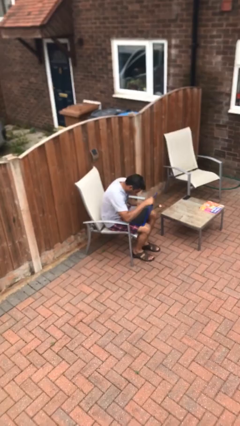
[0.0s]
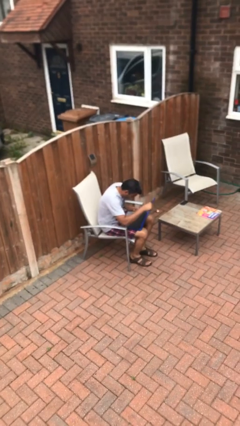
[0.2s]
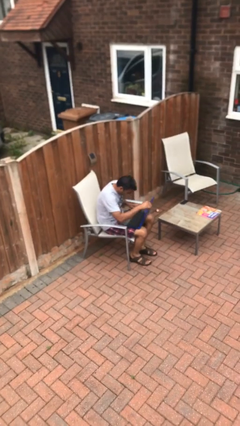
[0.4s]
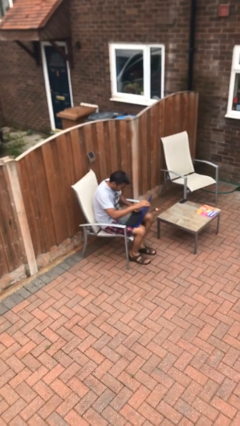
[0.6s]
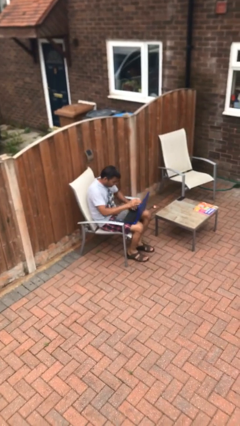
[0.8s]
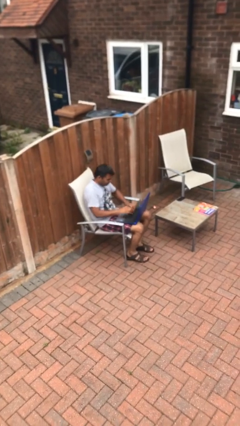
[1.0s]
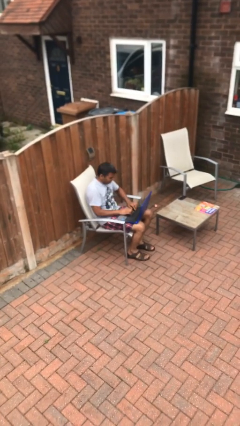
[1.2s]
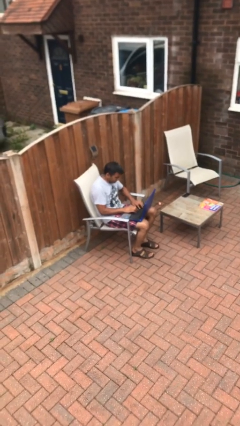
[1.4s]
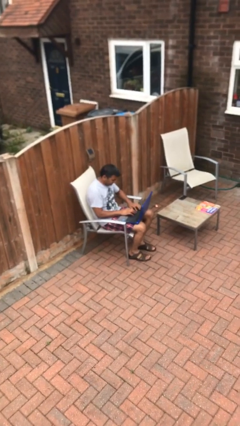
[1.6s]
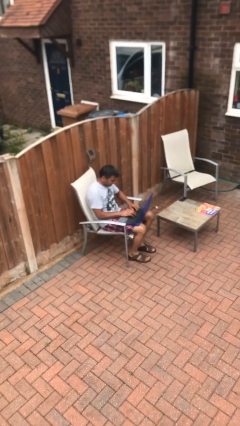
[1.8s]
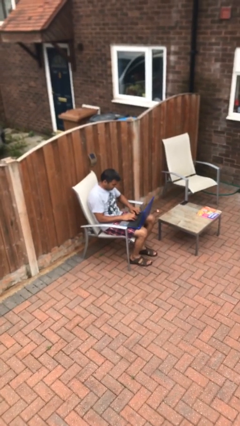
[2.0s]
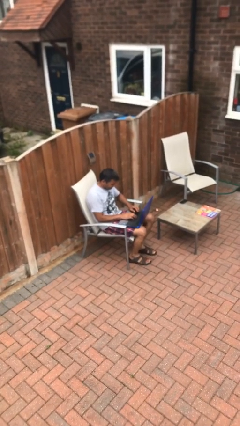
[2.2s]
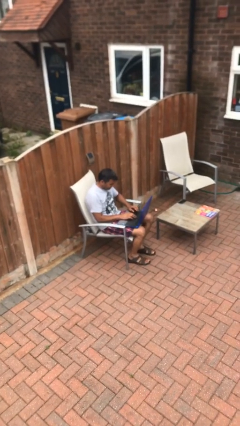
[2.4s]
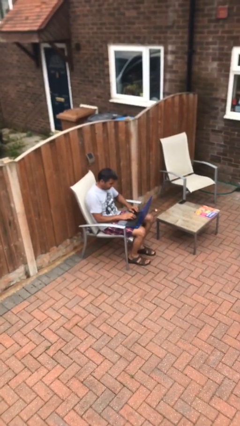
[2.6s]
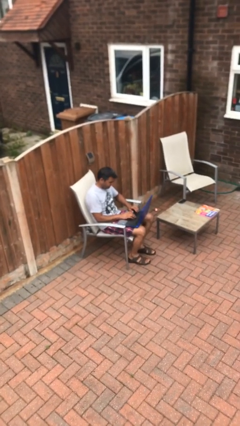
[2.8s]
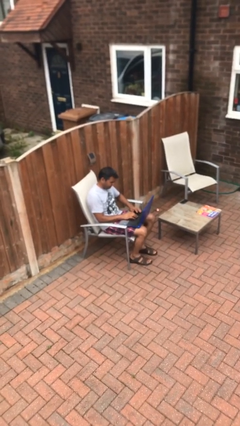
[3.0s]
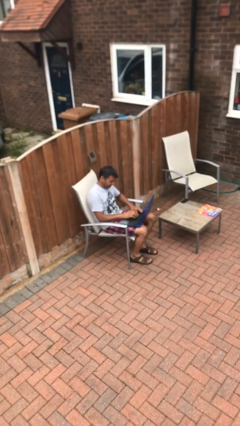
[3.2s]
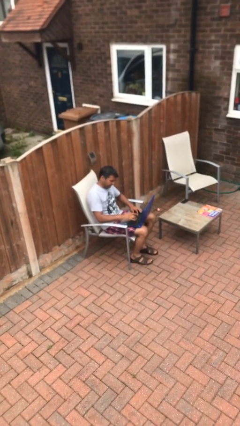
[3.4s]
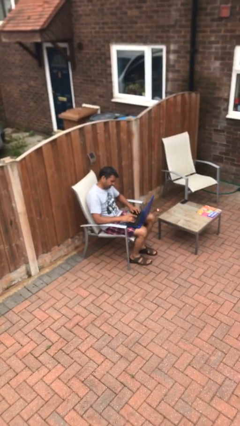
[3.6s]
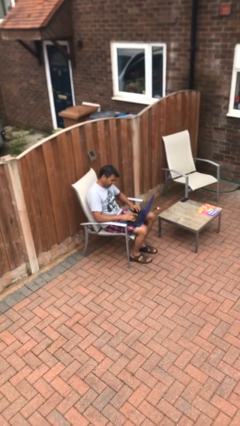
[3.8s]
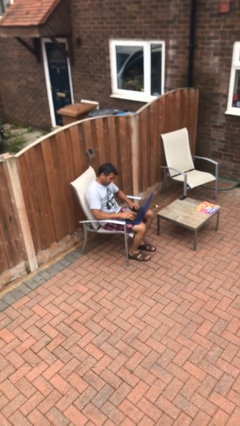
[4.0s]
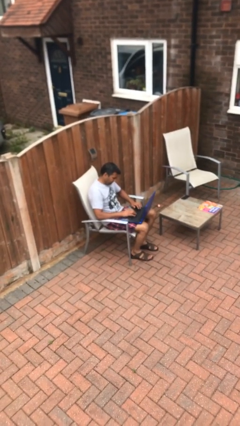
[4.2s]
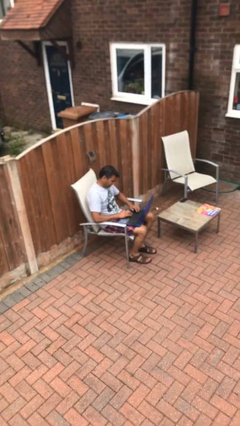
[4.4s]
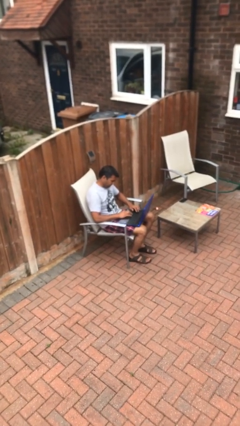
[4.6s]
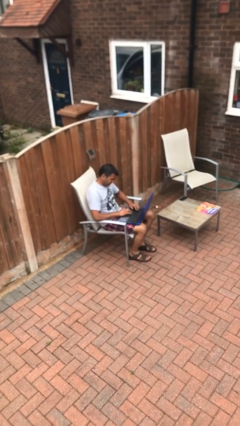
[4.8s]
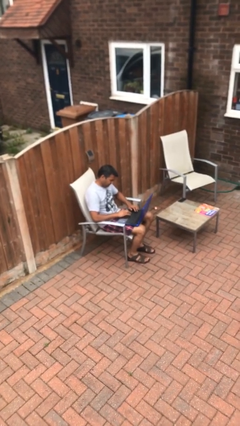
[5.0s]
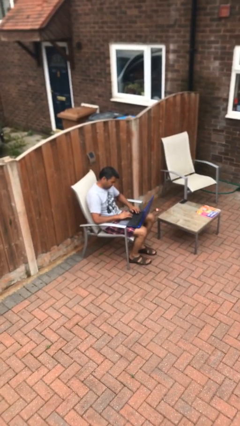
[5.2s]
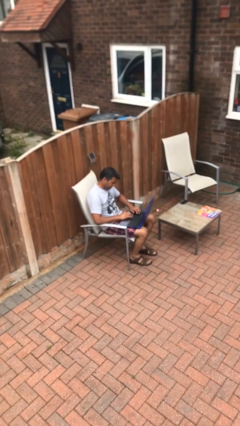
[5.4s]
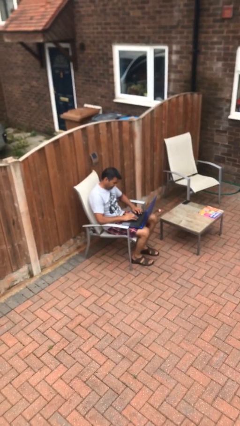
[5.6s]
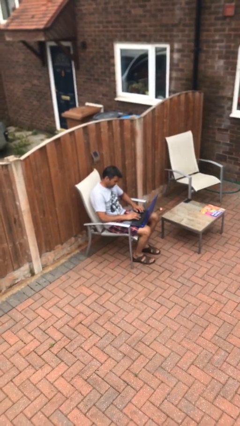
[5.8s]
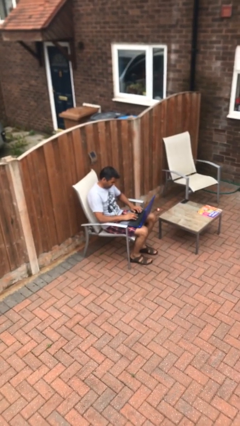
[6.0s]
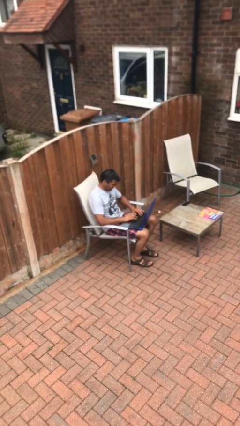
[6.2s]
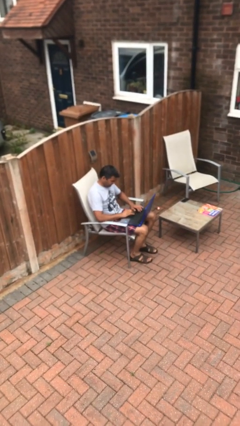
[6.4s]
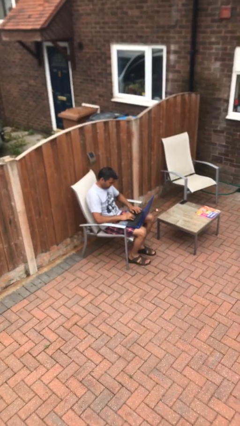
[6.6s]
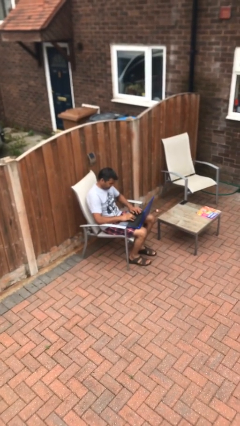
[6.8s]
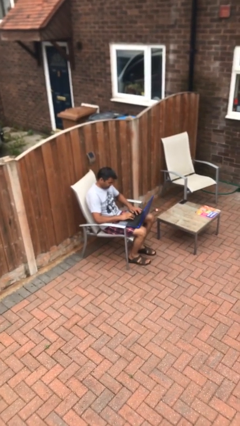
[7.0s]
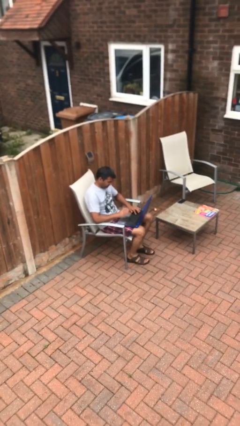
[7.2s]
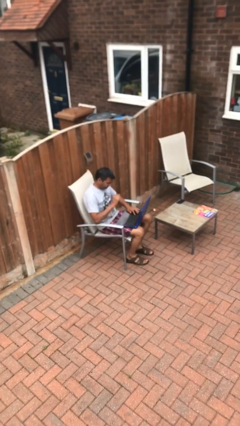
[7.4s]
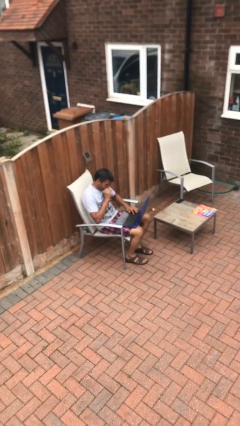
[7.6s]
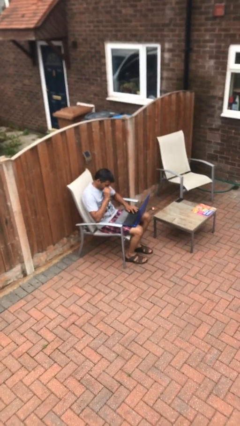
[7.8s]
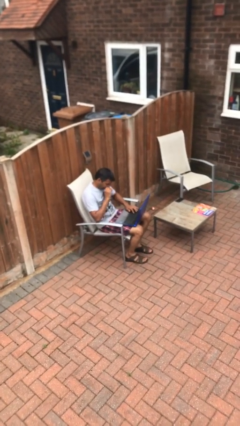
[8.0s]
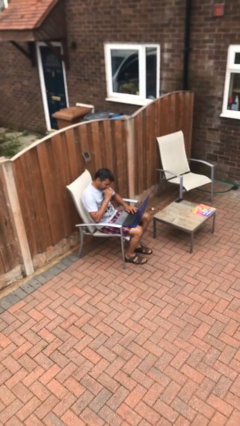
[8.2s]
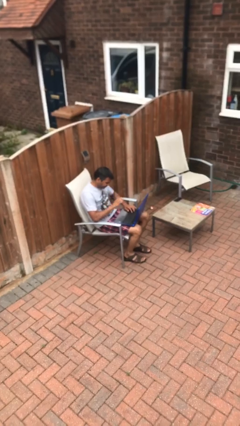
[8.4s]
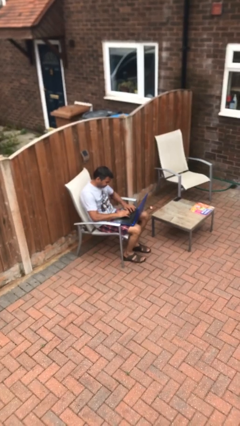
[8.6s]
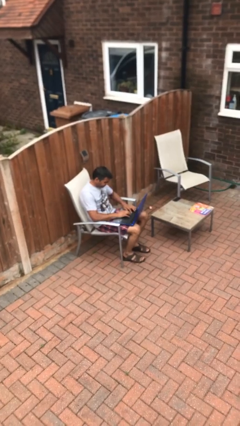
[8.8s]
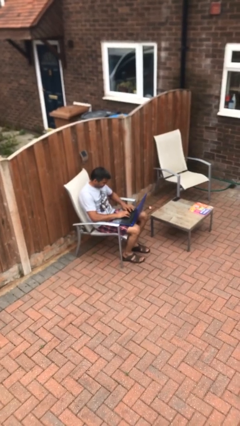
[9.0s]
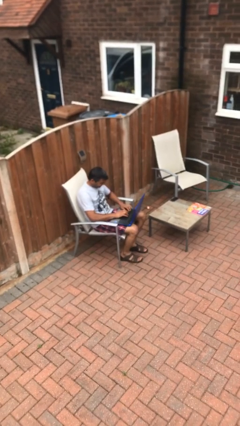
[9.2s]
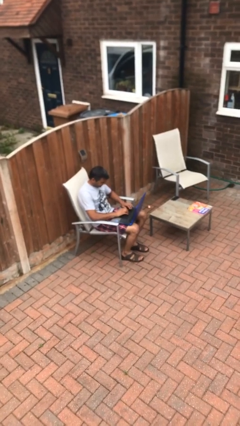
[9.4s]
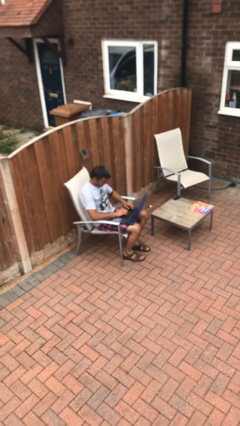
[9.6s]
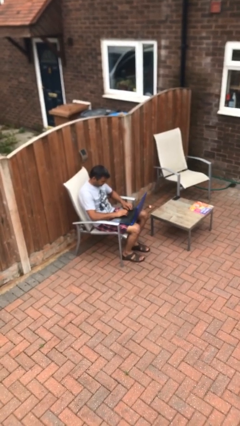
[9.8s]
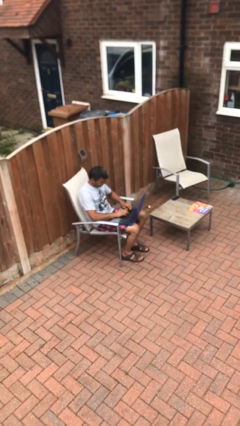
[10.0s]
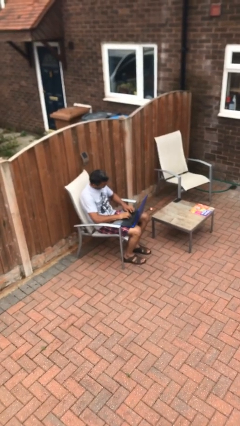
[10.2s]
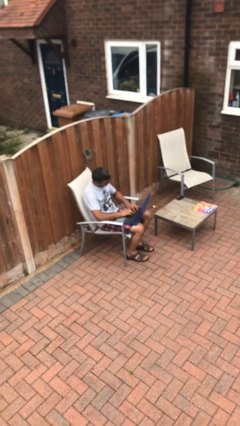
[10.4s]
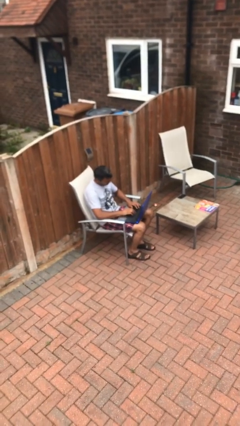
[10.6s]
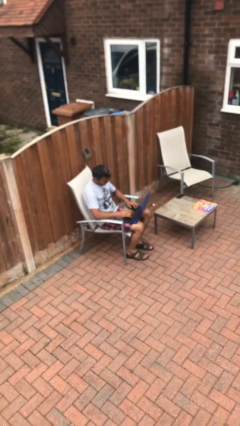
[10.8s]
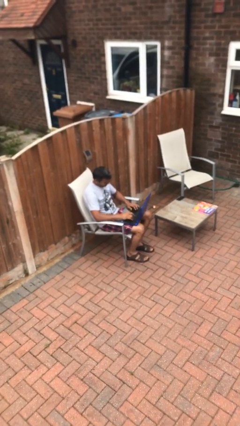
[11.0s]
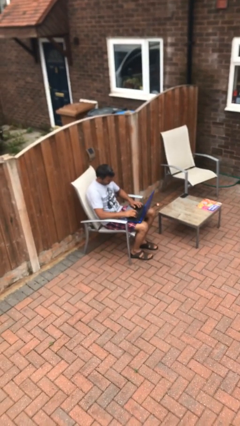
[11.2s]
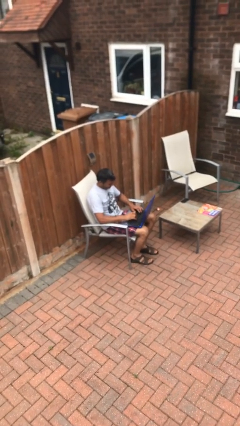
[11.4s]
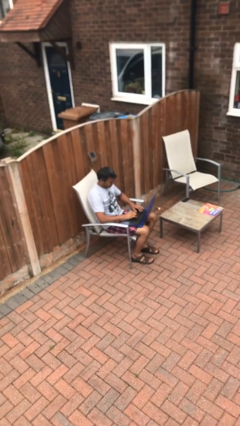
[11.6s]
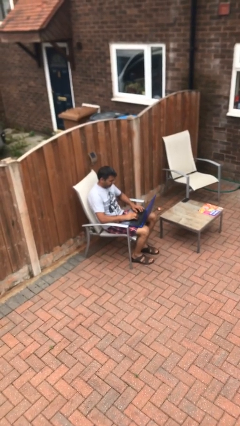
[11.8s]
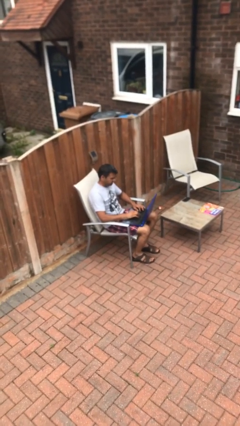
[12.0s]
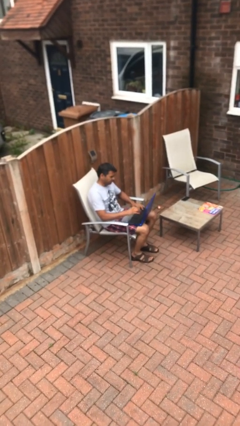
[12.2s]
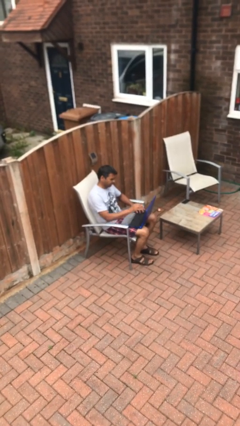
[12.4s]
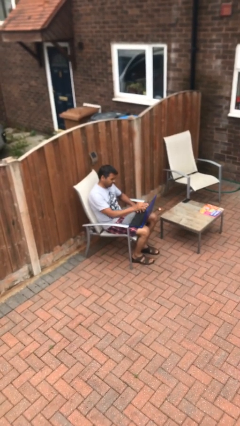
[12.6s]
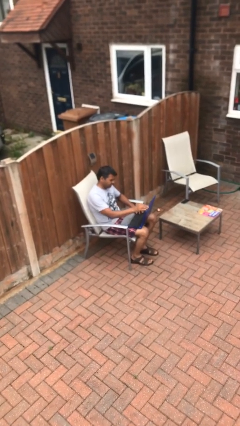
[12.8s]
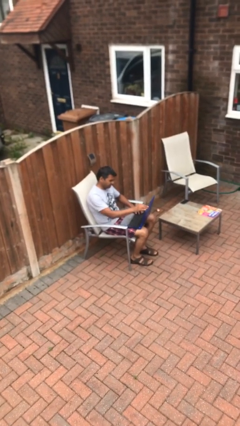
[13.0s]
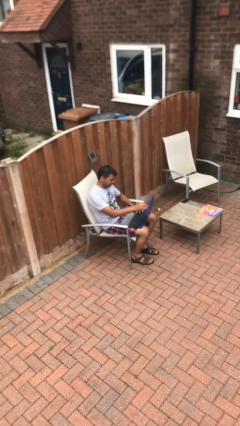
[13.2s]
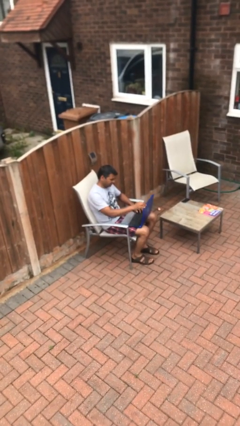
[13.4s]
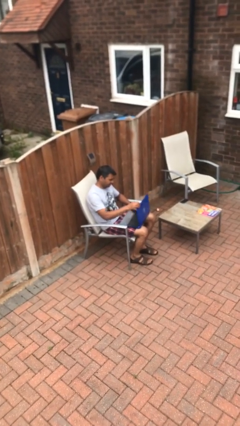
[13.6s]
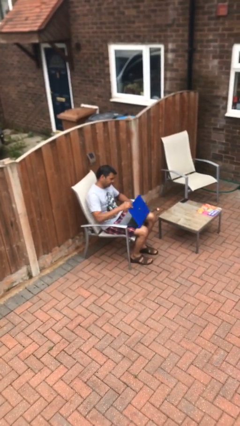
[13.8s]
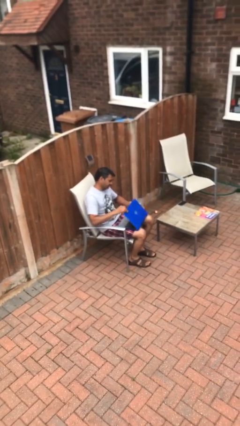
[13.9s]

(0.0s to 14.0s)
person interacts with laptop

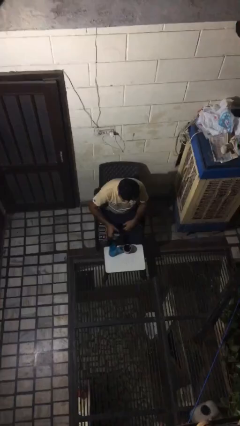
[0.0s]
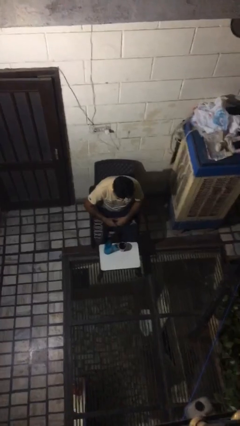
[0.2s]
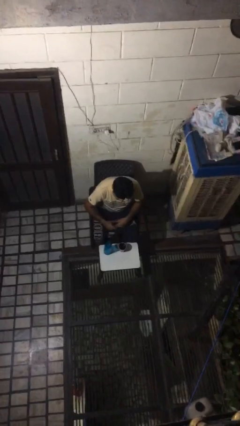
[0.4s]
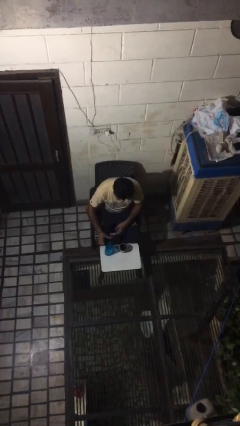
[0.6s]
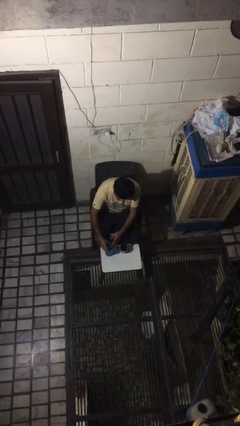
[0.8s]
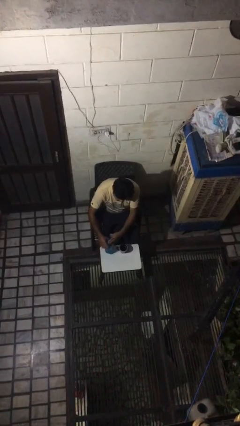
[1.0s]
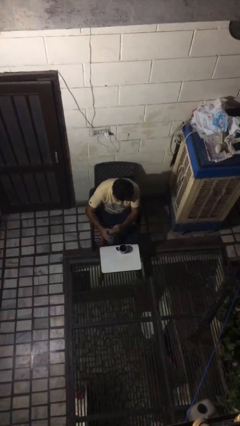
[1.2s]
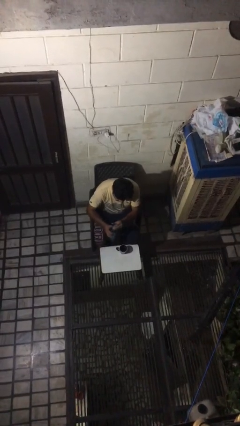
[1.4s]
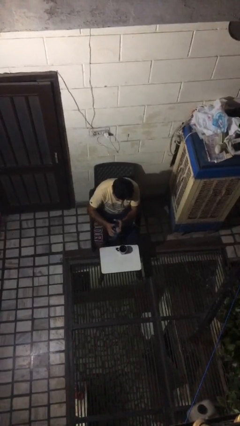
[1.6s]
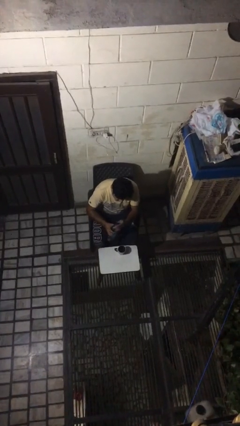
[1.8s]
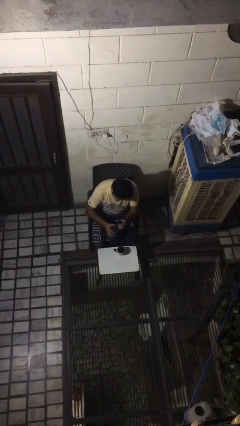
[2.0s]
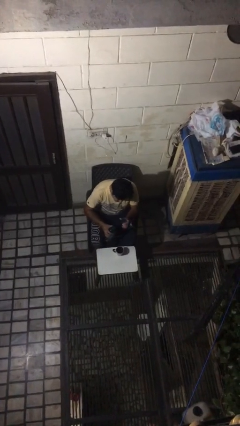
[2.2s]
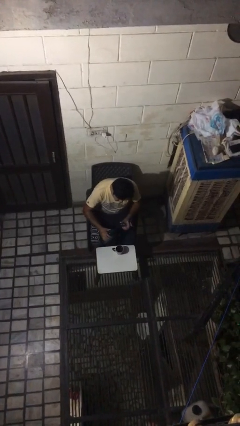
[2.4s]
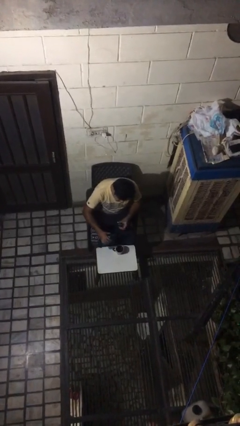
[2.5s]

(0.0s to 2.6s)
person unscrews lid from bottle

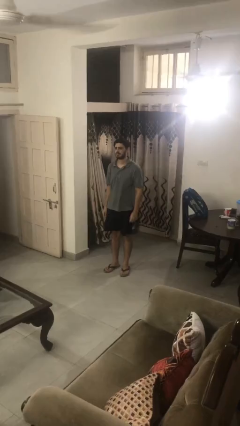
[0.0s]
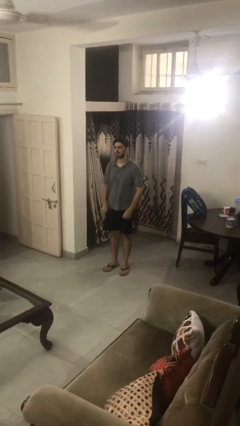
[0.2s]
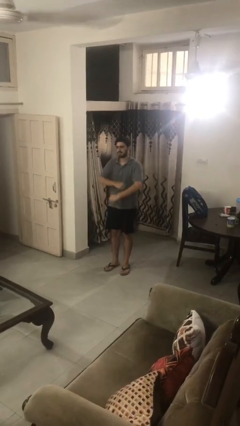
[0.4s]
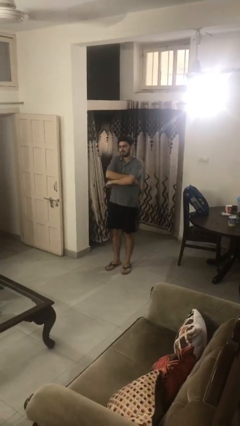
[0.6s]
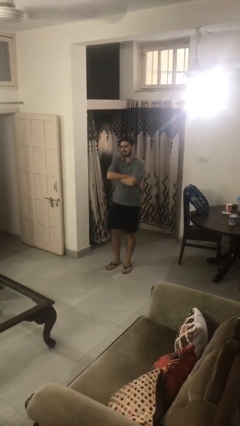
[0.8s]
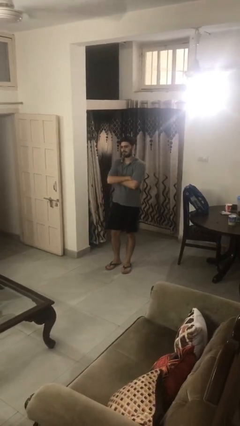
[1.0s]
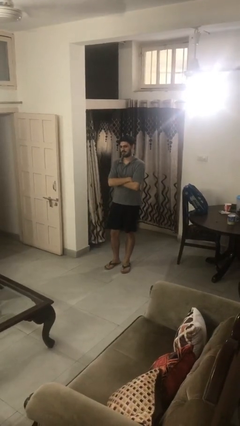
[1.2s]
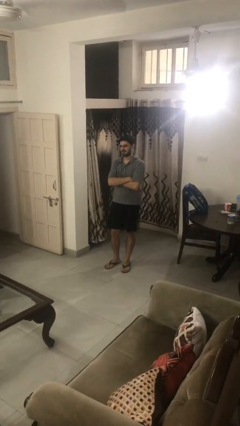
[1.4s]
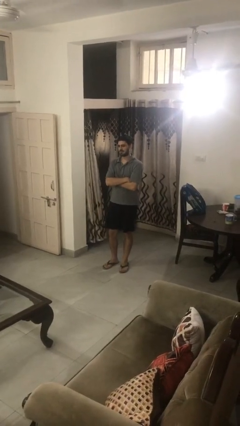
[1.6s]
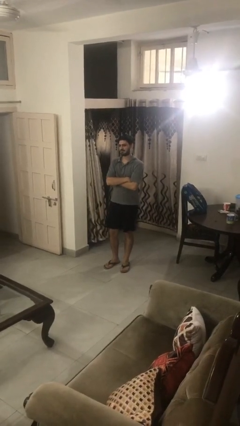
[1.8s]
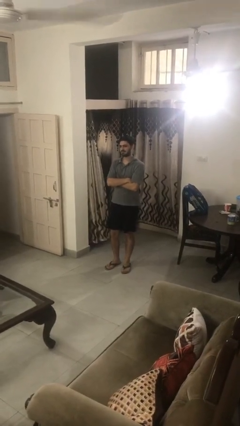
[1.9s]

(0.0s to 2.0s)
person crosses arms
